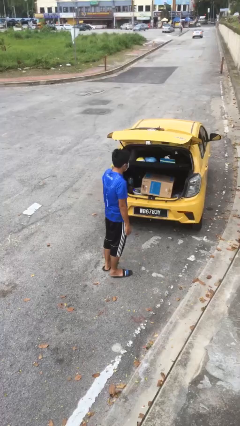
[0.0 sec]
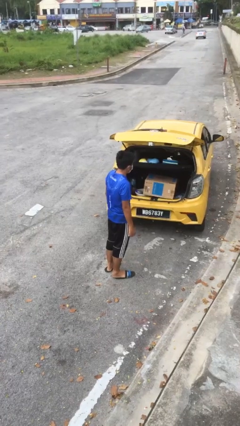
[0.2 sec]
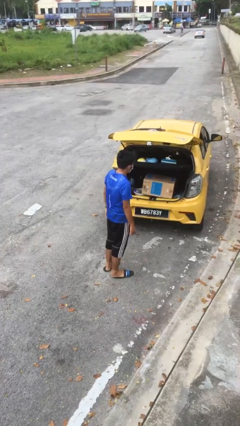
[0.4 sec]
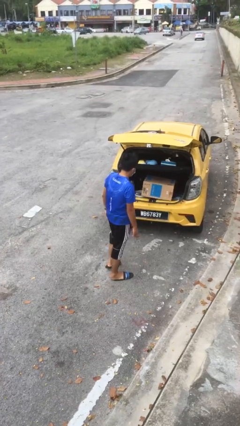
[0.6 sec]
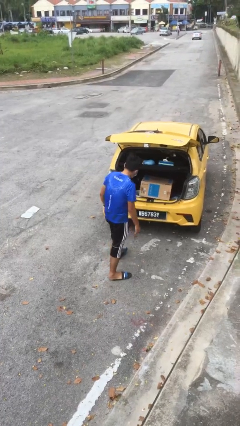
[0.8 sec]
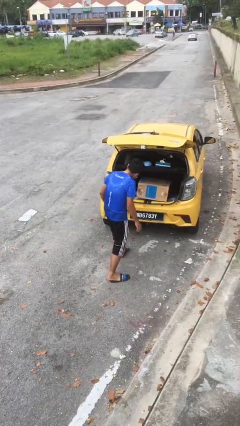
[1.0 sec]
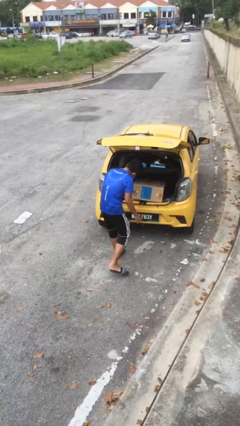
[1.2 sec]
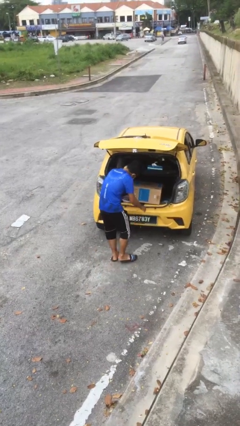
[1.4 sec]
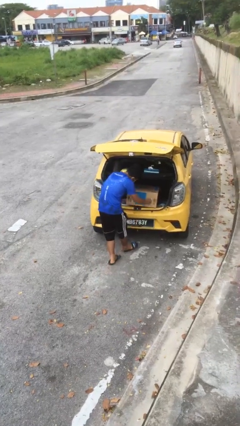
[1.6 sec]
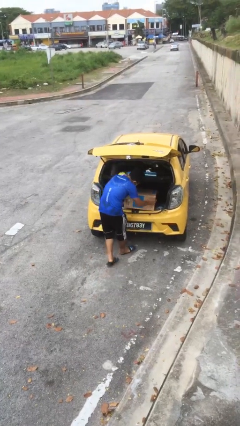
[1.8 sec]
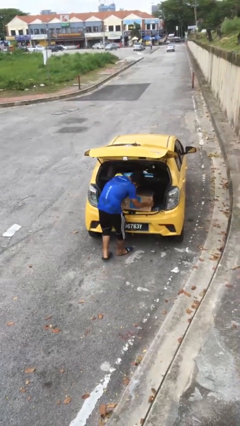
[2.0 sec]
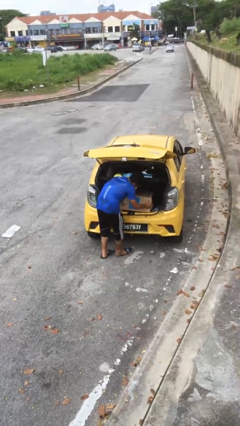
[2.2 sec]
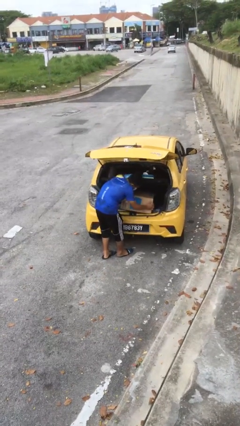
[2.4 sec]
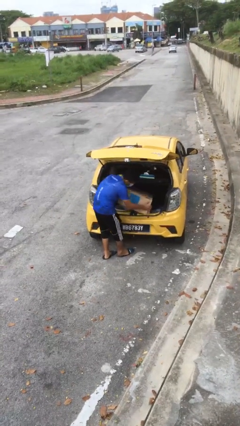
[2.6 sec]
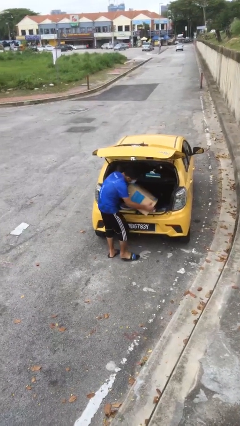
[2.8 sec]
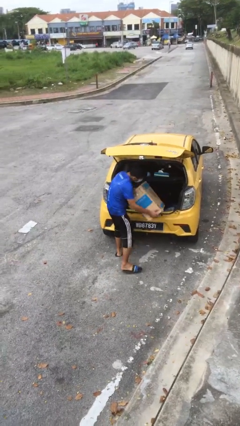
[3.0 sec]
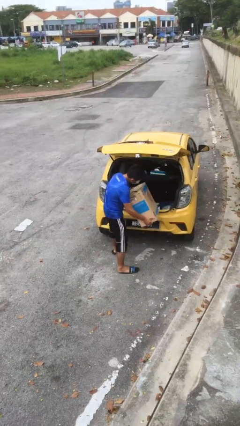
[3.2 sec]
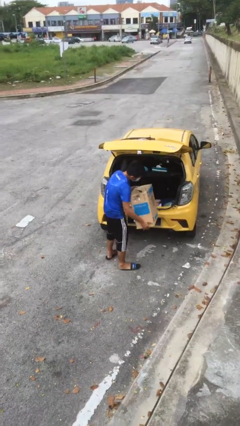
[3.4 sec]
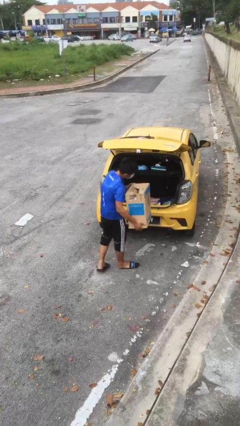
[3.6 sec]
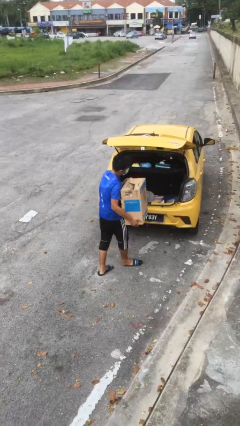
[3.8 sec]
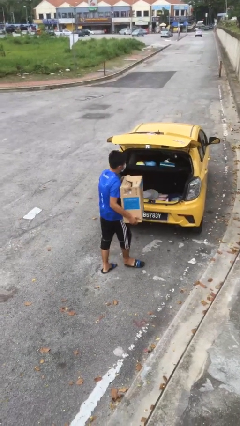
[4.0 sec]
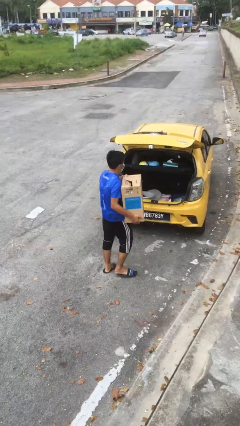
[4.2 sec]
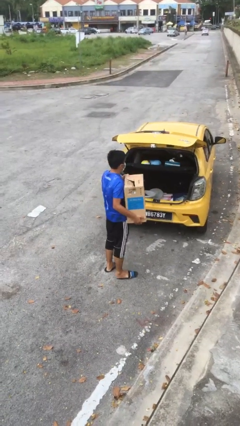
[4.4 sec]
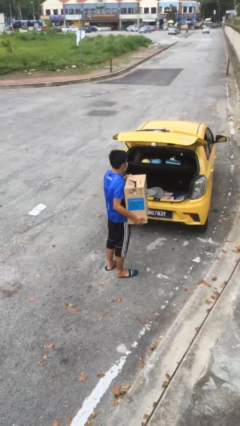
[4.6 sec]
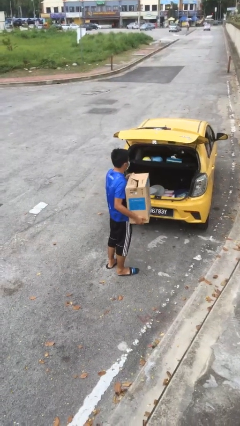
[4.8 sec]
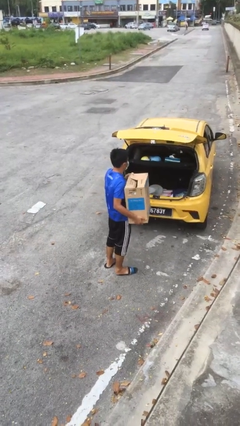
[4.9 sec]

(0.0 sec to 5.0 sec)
person unloads car

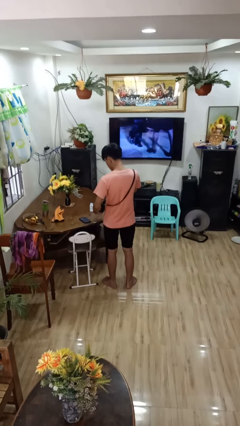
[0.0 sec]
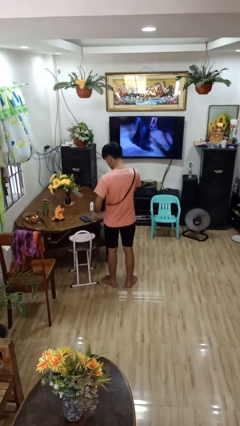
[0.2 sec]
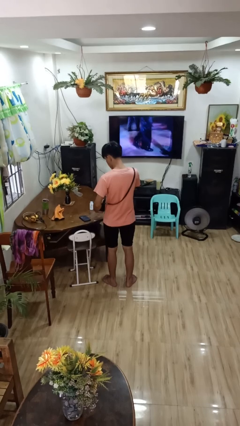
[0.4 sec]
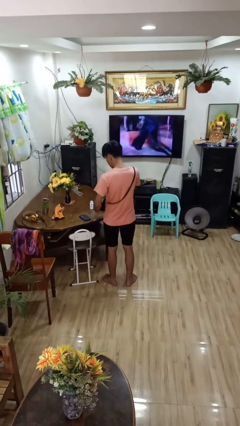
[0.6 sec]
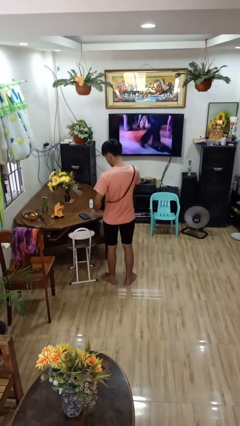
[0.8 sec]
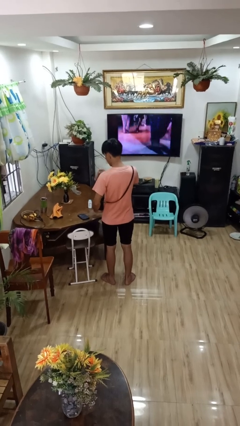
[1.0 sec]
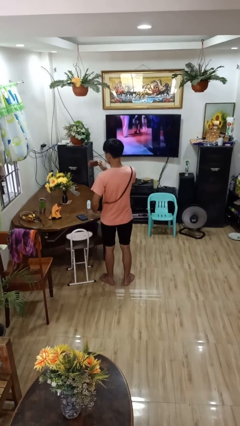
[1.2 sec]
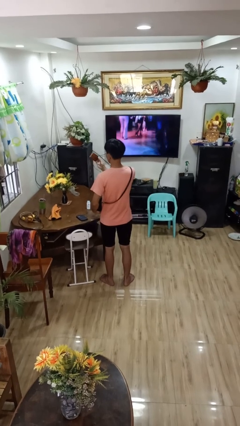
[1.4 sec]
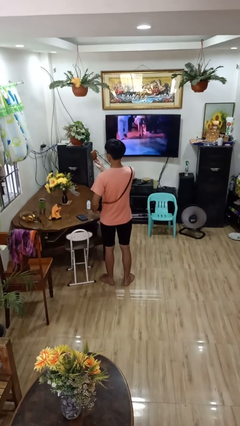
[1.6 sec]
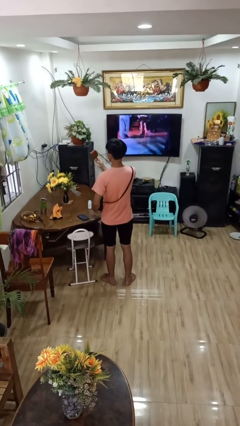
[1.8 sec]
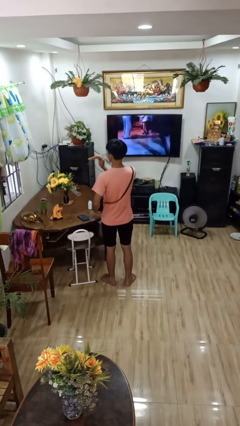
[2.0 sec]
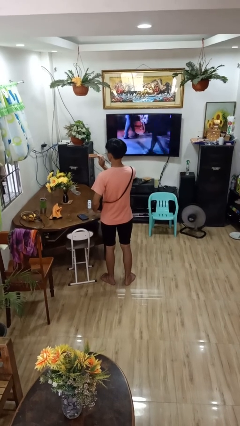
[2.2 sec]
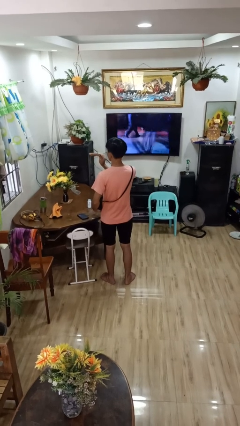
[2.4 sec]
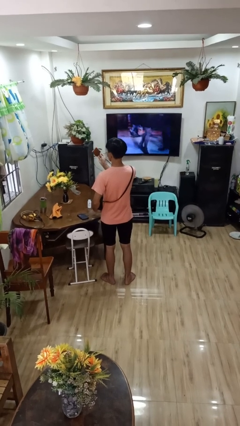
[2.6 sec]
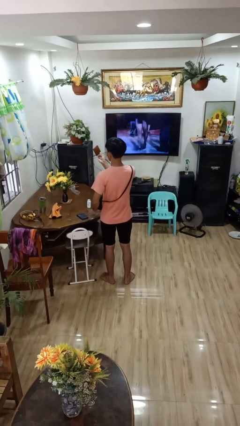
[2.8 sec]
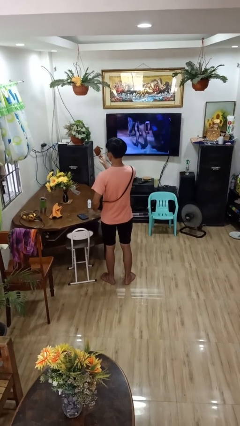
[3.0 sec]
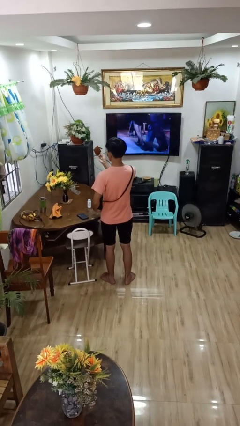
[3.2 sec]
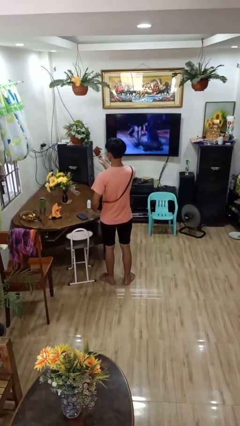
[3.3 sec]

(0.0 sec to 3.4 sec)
person takes object from purse

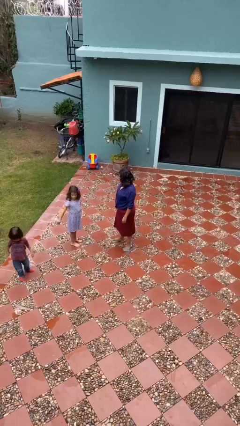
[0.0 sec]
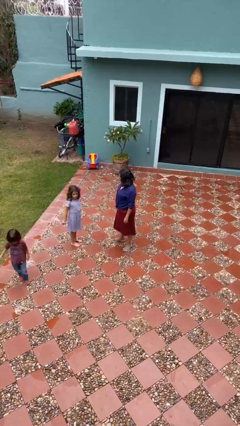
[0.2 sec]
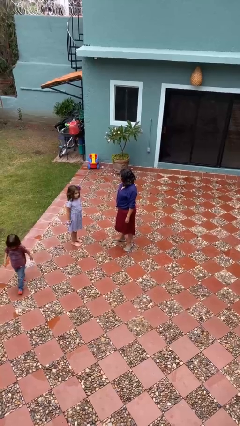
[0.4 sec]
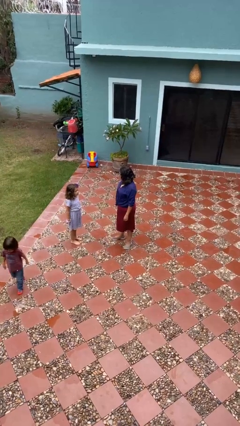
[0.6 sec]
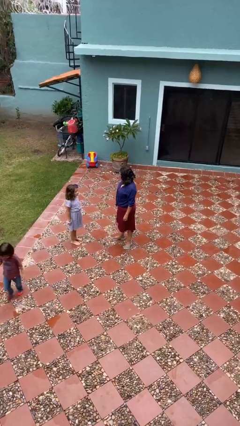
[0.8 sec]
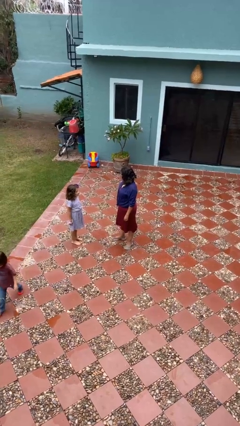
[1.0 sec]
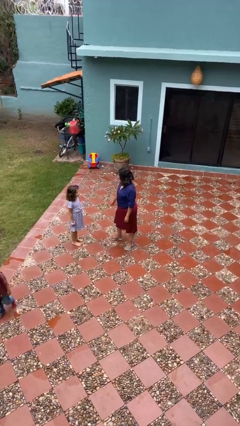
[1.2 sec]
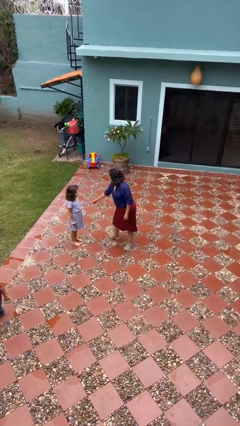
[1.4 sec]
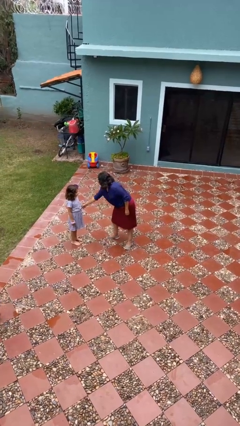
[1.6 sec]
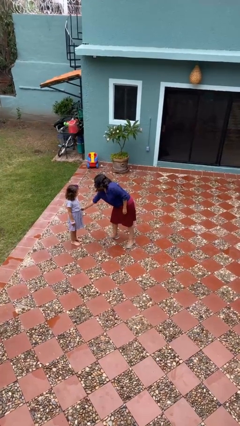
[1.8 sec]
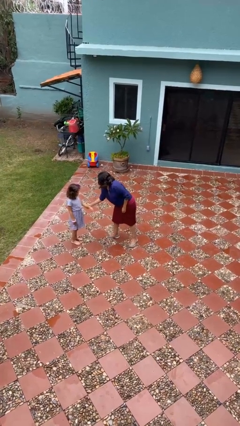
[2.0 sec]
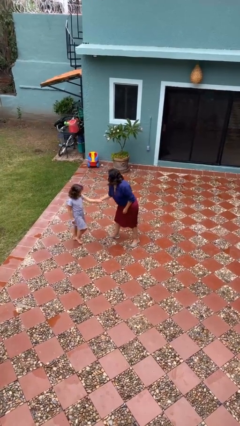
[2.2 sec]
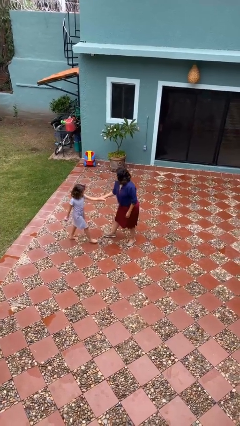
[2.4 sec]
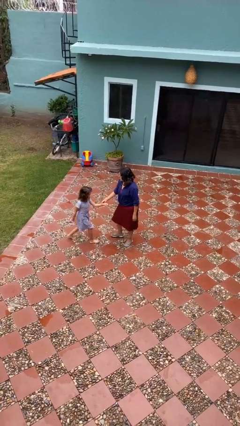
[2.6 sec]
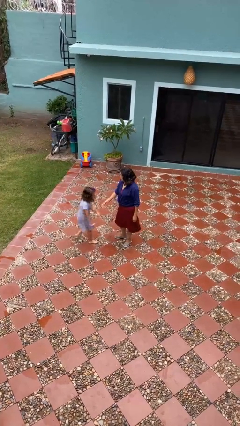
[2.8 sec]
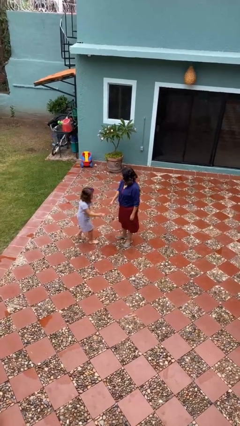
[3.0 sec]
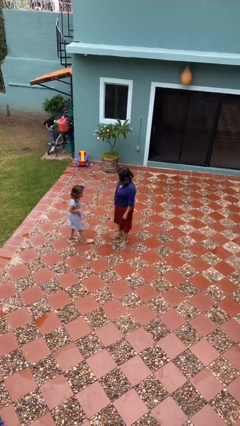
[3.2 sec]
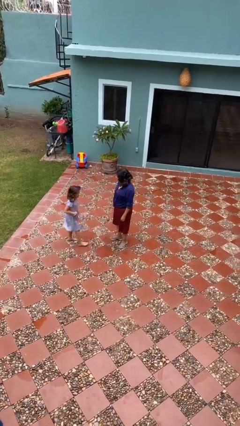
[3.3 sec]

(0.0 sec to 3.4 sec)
person grabs person by forearm

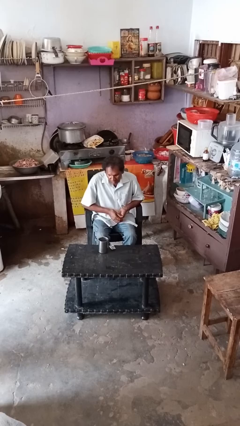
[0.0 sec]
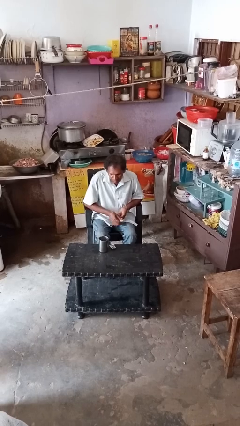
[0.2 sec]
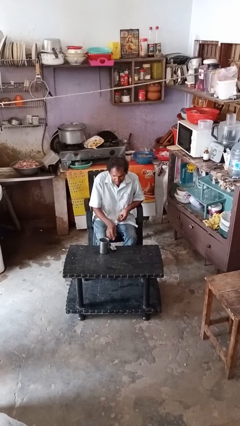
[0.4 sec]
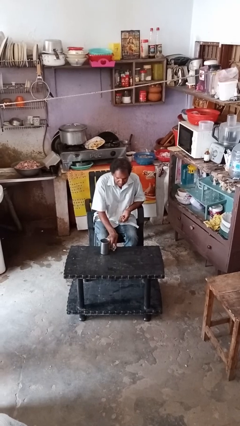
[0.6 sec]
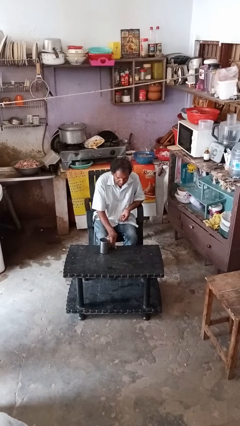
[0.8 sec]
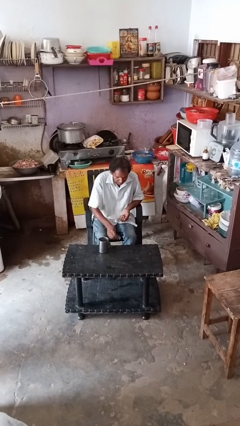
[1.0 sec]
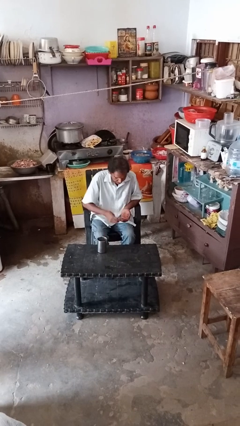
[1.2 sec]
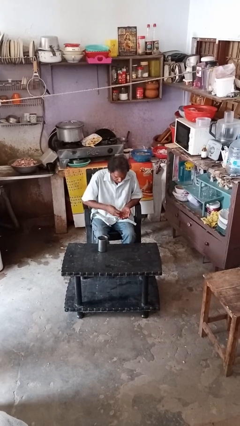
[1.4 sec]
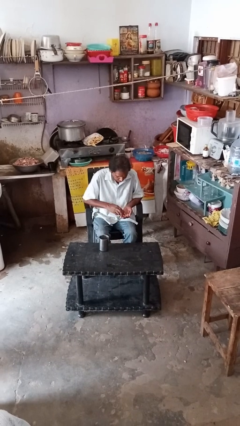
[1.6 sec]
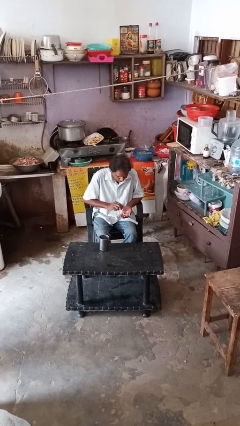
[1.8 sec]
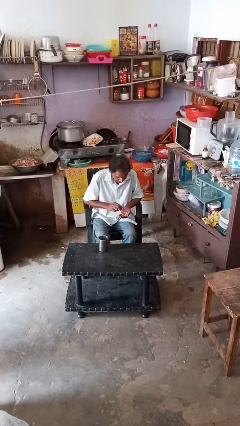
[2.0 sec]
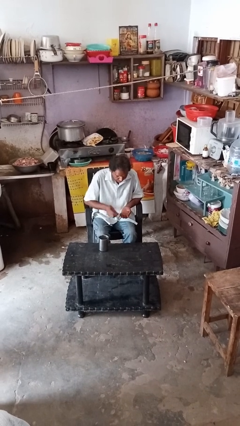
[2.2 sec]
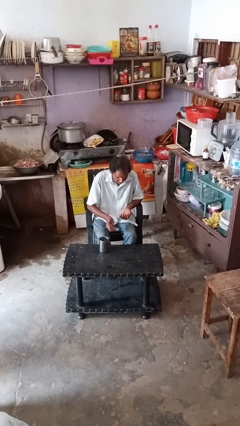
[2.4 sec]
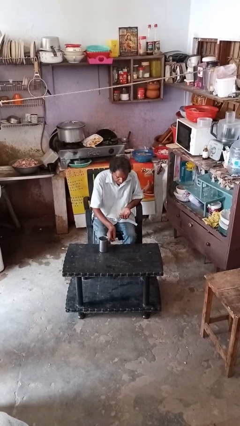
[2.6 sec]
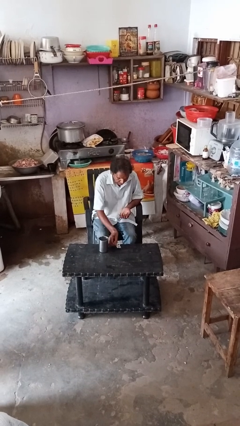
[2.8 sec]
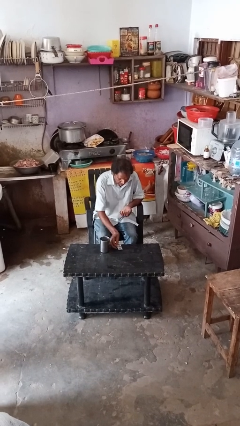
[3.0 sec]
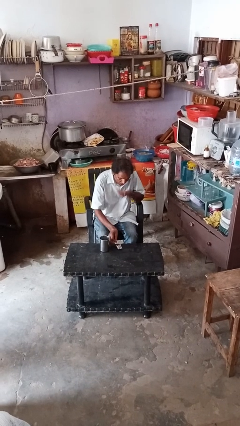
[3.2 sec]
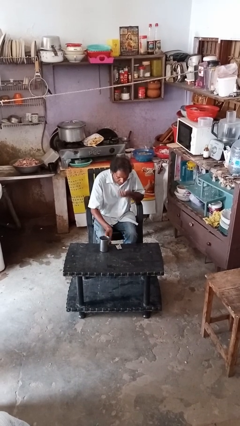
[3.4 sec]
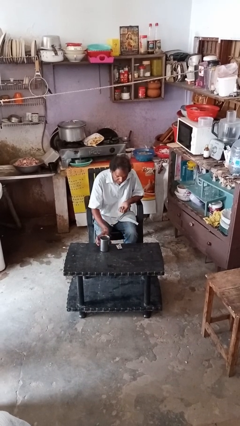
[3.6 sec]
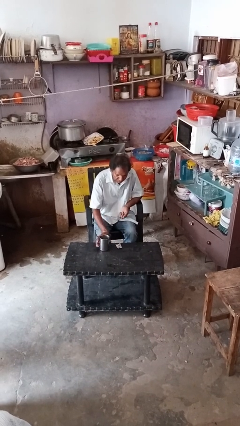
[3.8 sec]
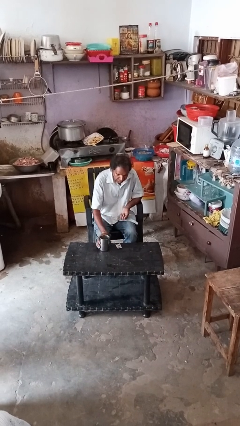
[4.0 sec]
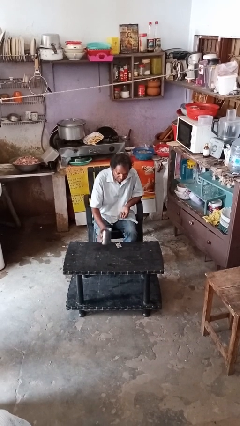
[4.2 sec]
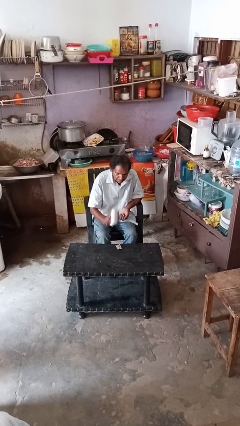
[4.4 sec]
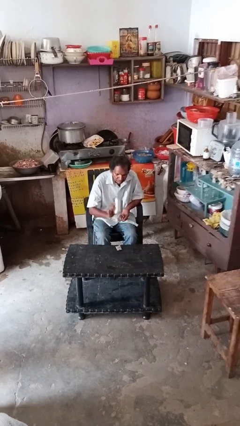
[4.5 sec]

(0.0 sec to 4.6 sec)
person takes medicine pills

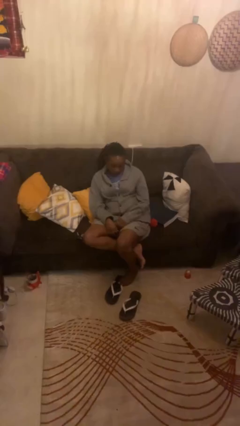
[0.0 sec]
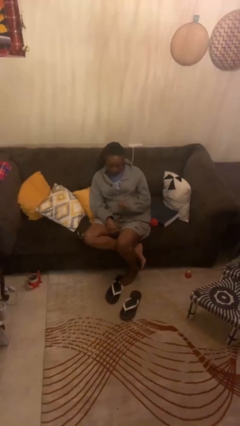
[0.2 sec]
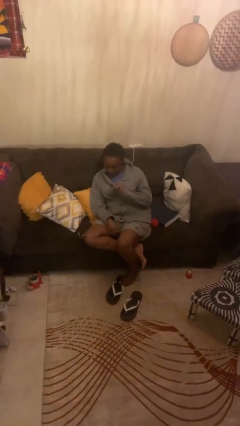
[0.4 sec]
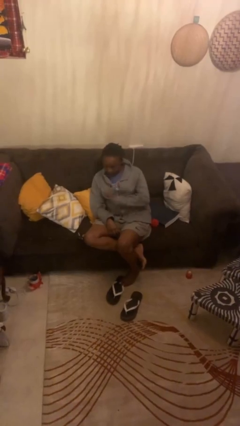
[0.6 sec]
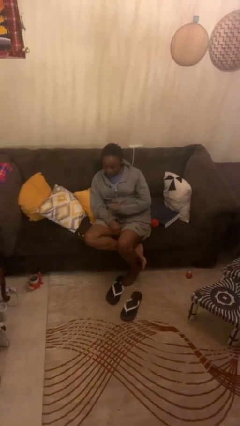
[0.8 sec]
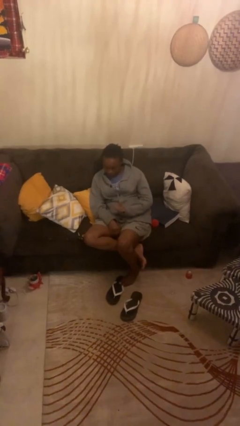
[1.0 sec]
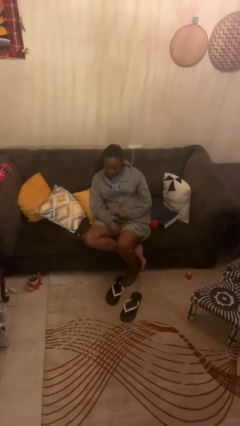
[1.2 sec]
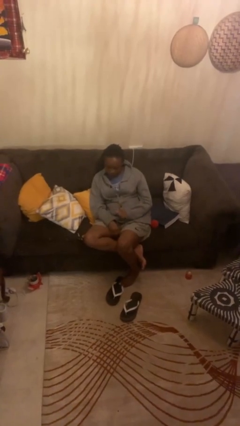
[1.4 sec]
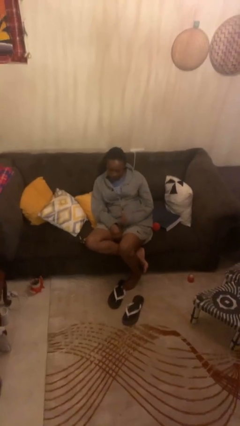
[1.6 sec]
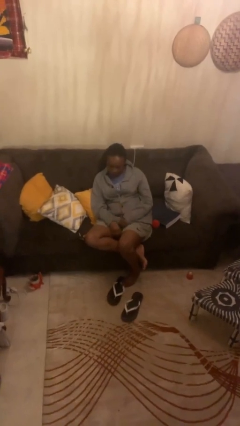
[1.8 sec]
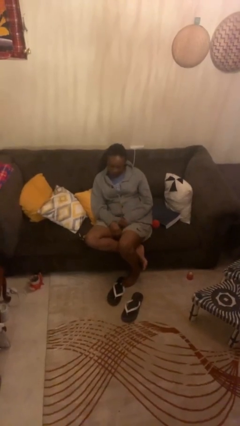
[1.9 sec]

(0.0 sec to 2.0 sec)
person swats bug
